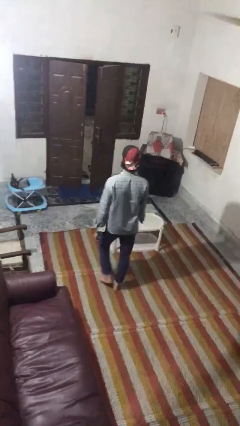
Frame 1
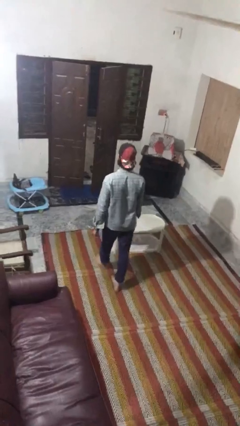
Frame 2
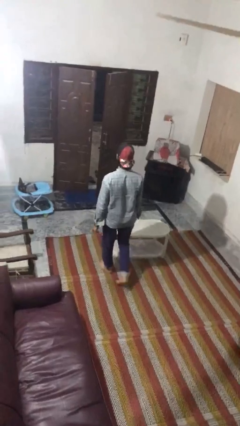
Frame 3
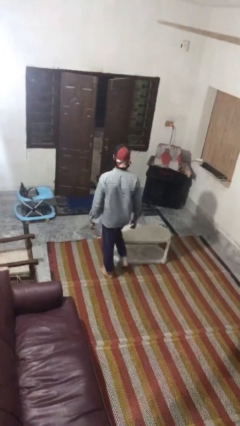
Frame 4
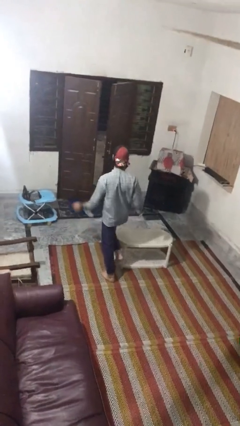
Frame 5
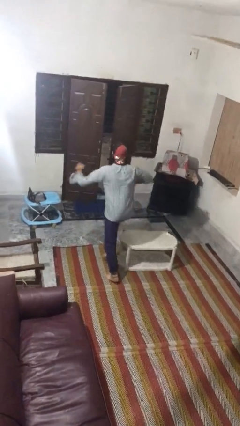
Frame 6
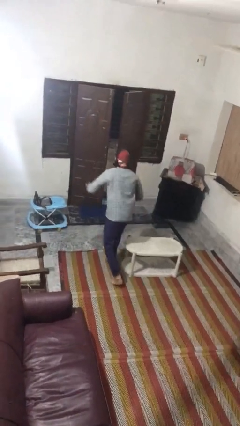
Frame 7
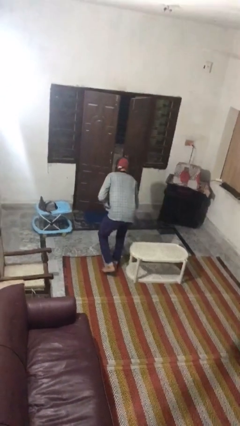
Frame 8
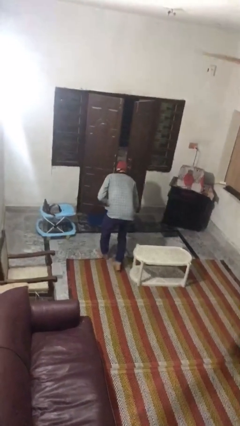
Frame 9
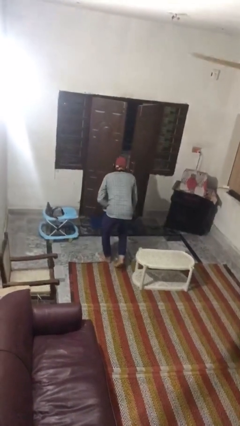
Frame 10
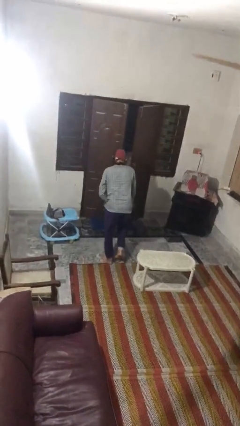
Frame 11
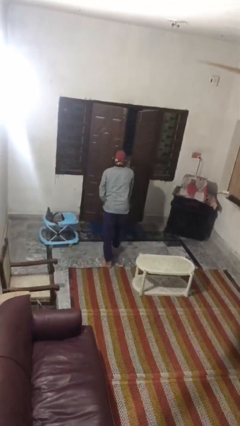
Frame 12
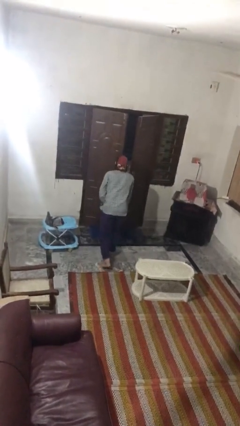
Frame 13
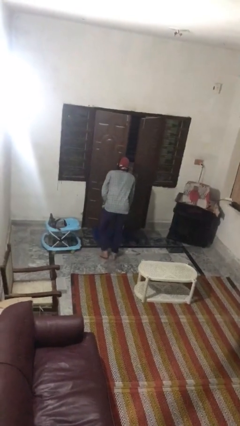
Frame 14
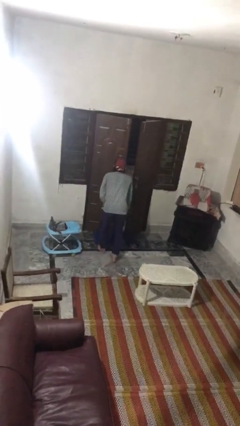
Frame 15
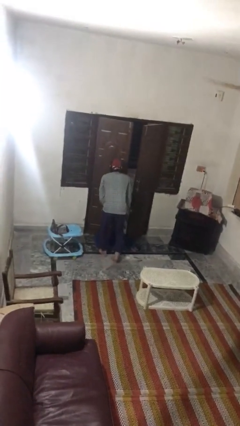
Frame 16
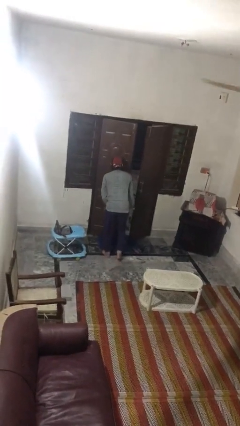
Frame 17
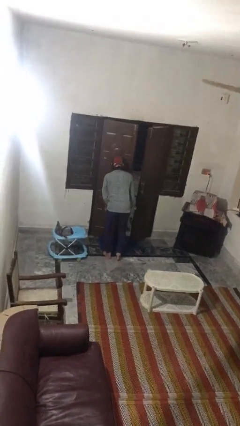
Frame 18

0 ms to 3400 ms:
person bumps into table

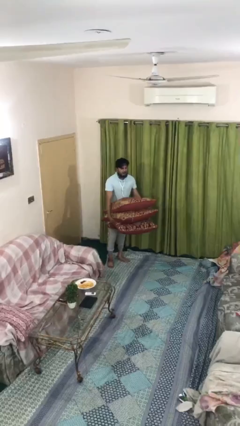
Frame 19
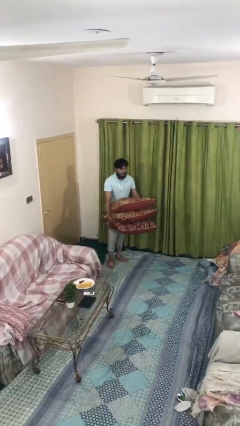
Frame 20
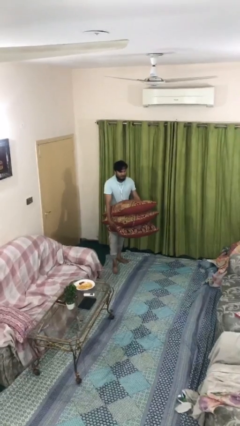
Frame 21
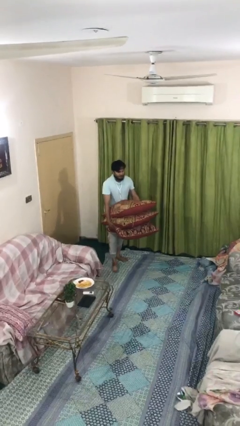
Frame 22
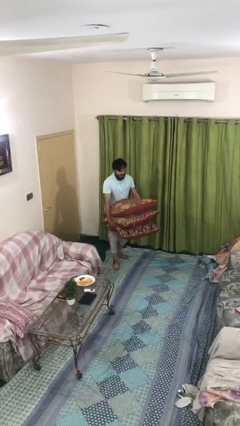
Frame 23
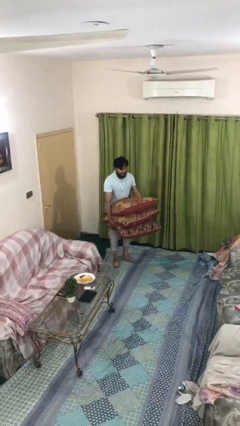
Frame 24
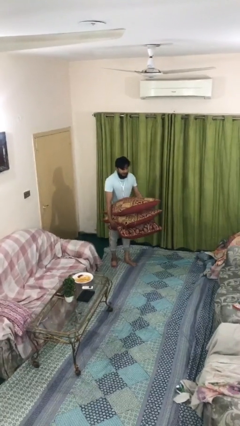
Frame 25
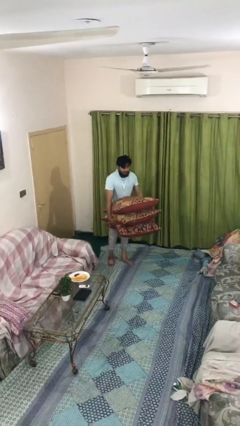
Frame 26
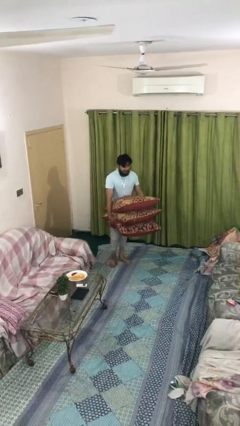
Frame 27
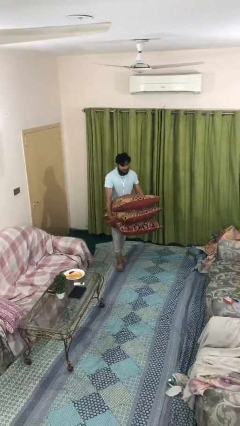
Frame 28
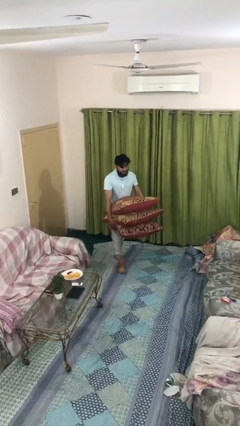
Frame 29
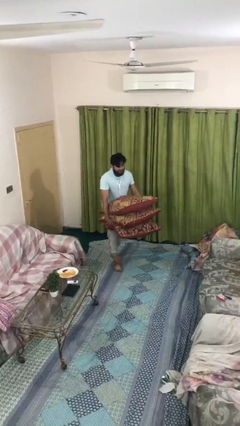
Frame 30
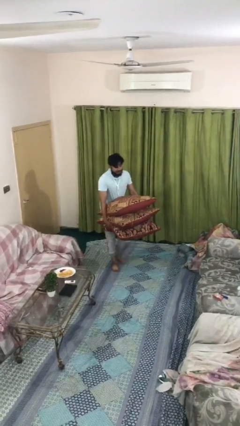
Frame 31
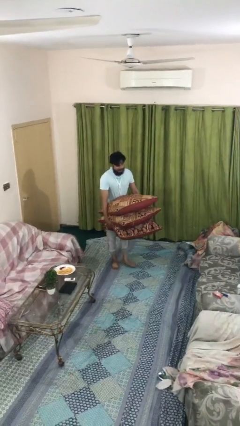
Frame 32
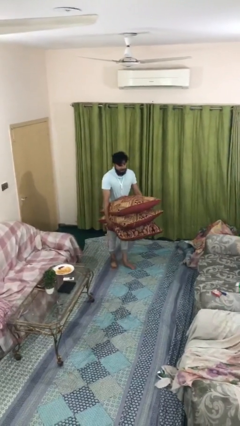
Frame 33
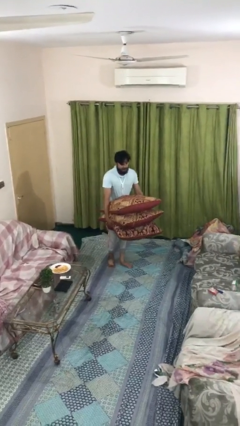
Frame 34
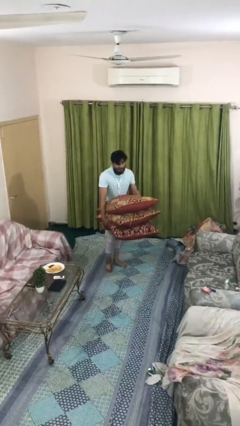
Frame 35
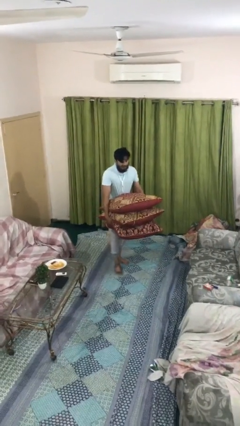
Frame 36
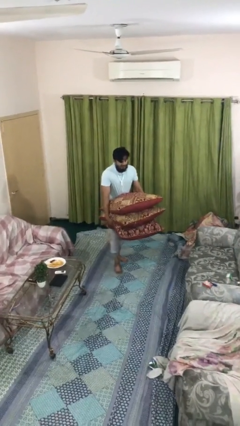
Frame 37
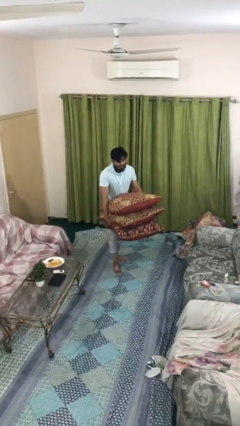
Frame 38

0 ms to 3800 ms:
person carries heavy object

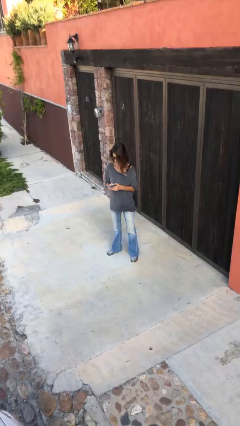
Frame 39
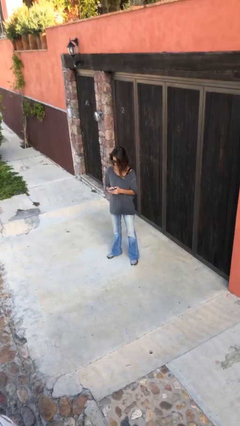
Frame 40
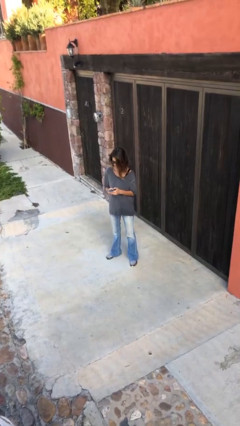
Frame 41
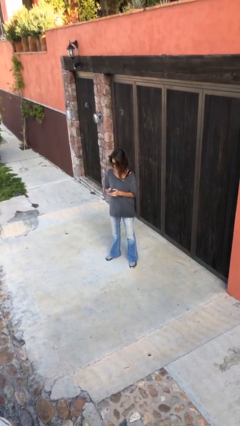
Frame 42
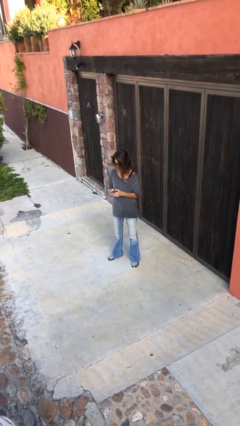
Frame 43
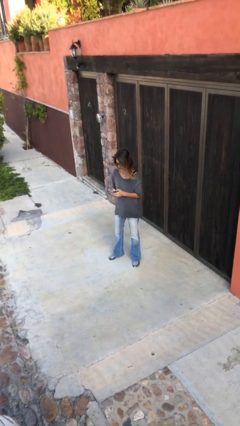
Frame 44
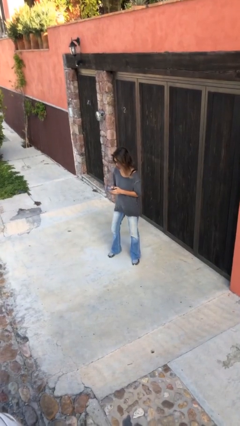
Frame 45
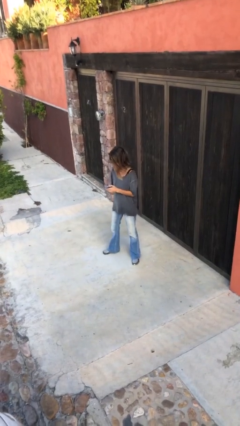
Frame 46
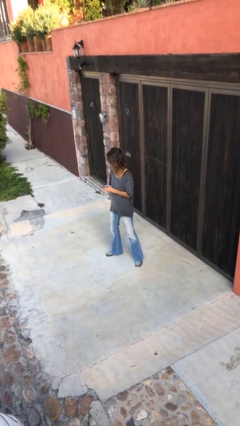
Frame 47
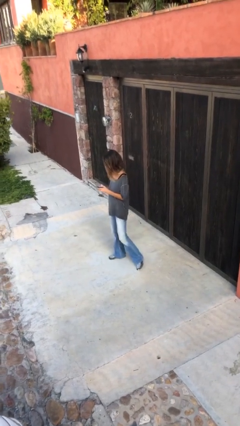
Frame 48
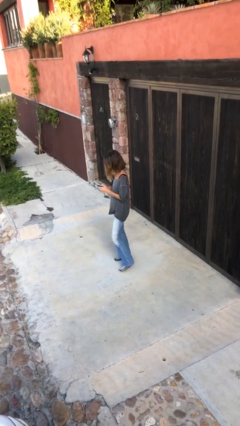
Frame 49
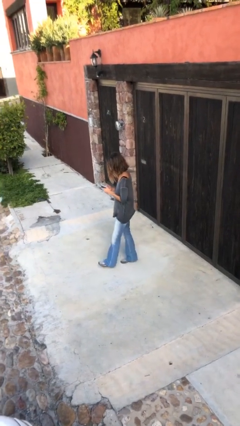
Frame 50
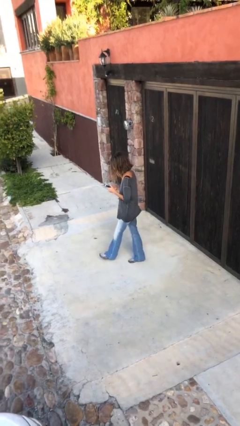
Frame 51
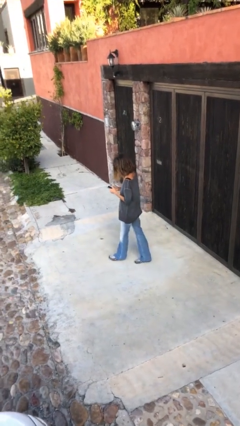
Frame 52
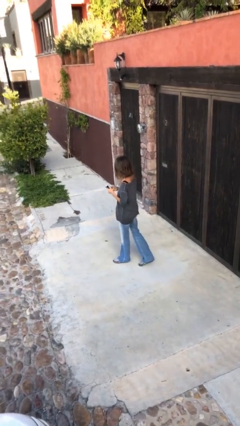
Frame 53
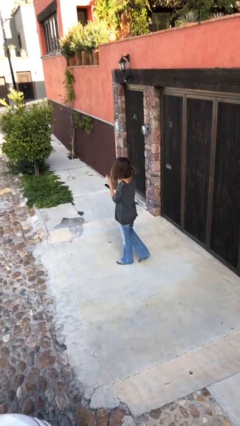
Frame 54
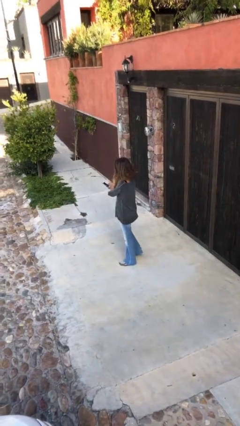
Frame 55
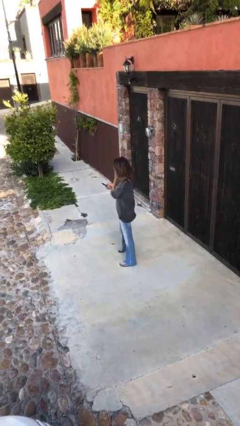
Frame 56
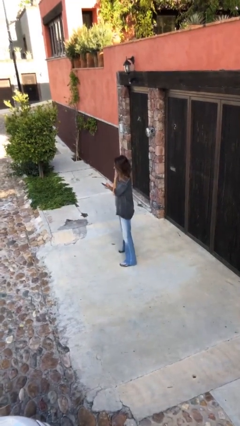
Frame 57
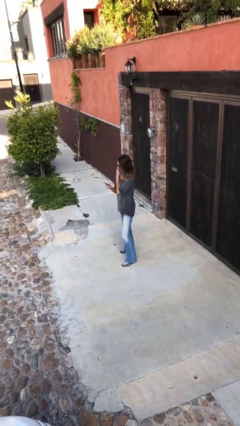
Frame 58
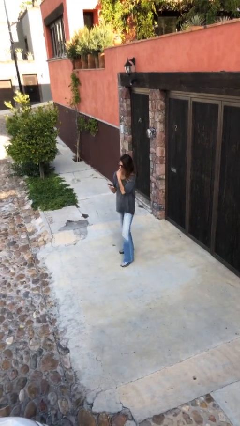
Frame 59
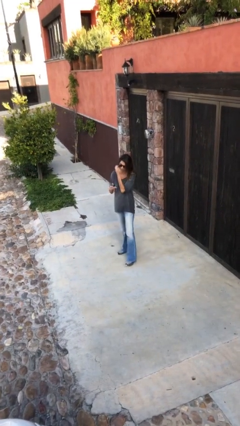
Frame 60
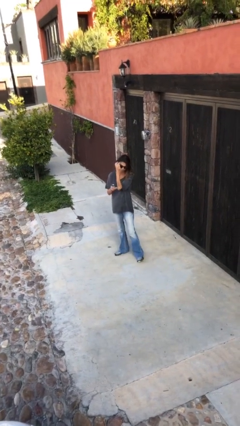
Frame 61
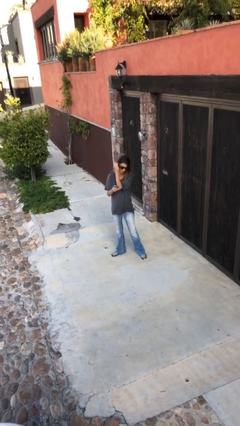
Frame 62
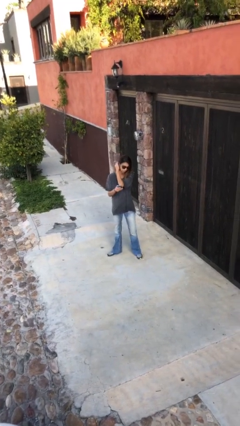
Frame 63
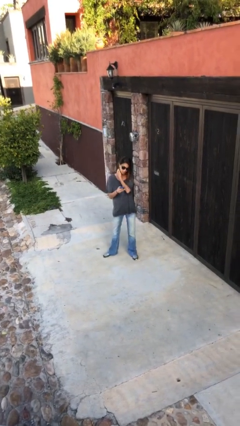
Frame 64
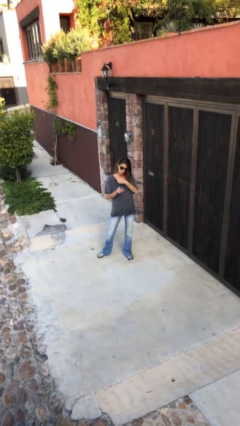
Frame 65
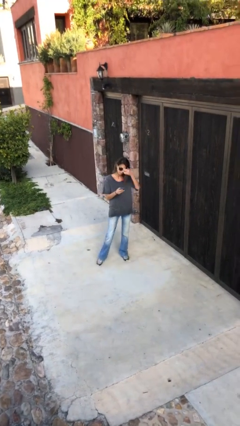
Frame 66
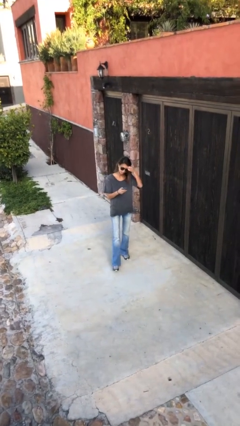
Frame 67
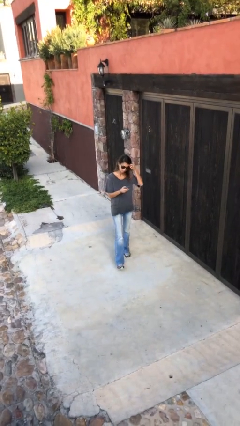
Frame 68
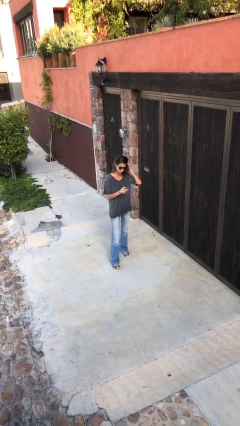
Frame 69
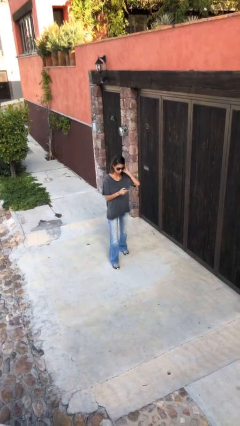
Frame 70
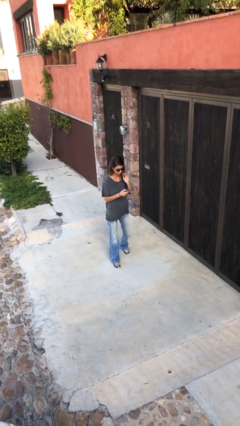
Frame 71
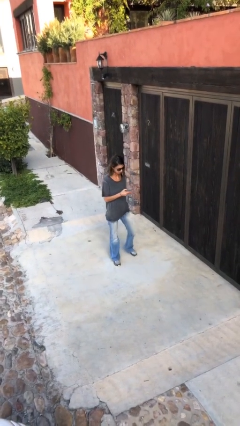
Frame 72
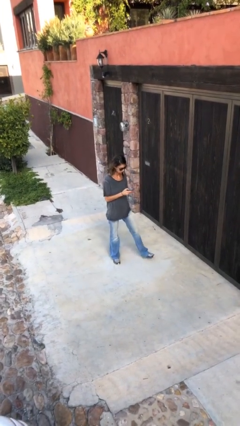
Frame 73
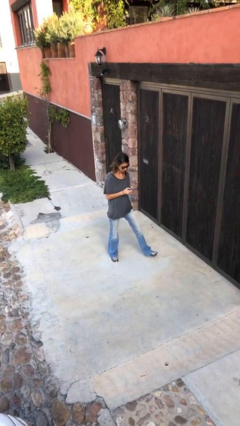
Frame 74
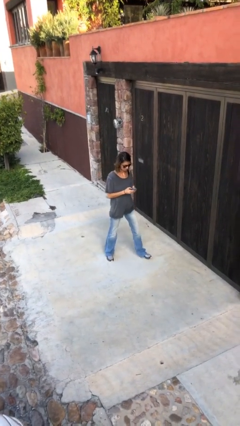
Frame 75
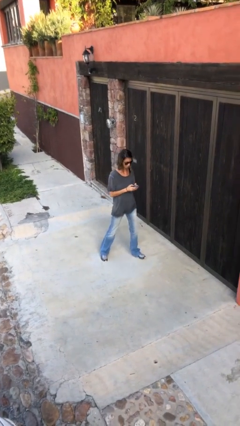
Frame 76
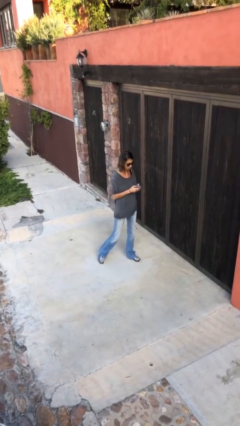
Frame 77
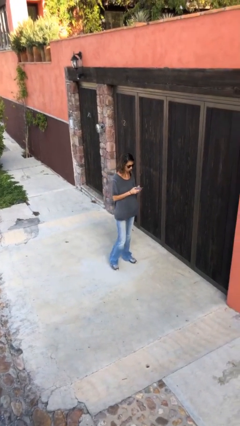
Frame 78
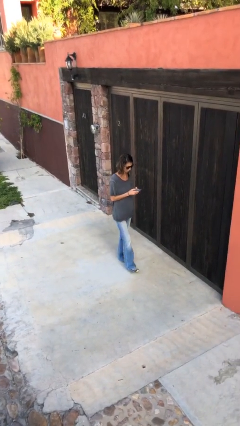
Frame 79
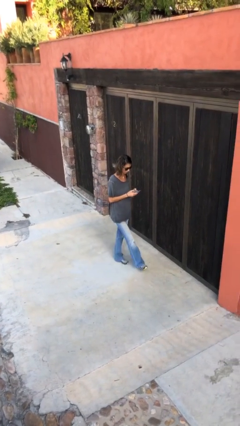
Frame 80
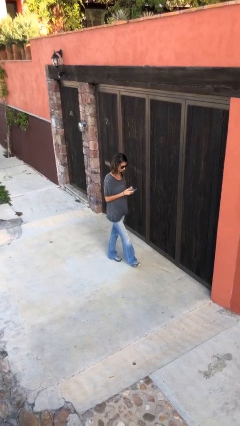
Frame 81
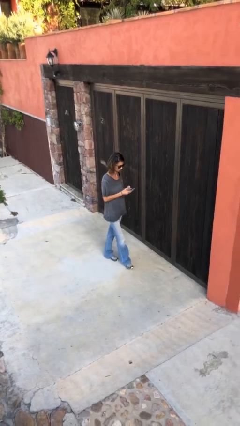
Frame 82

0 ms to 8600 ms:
person texts on phone

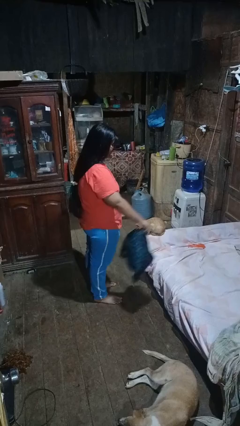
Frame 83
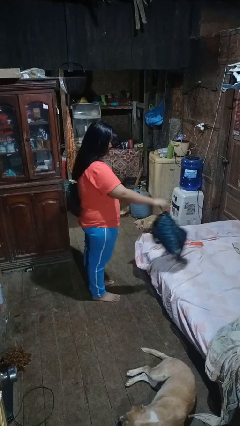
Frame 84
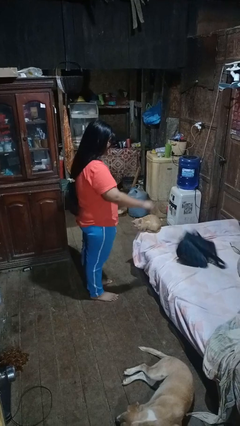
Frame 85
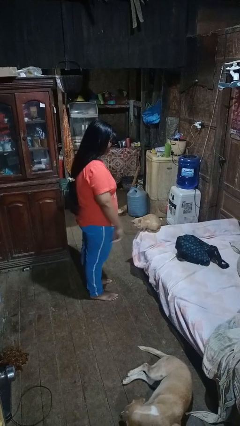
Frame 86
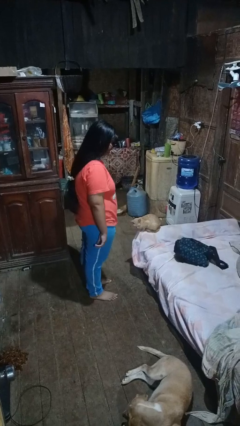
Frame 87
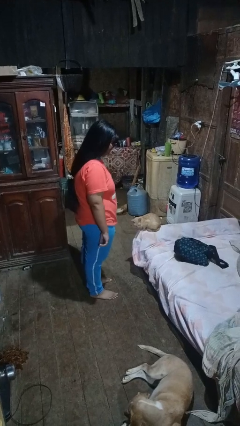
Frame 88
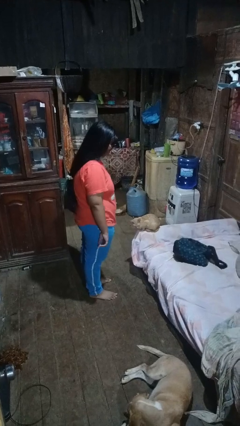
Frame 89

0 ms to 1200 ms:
person throws object on bed

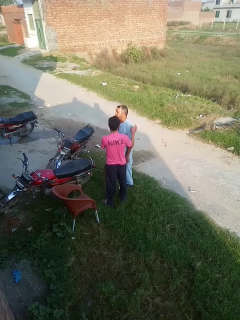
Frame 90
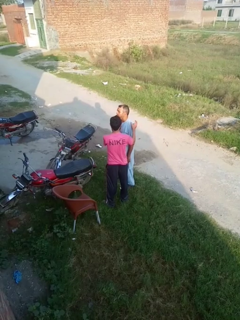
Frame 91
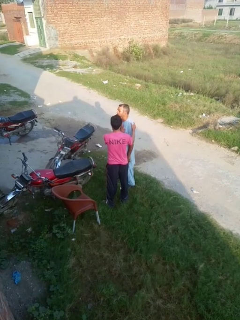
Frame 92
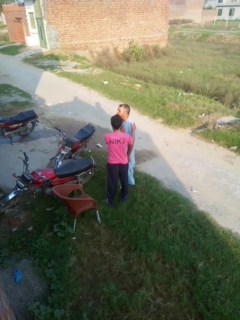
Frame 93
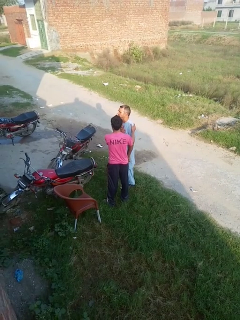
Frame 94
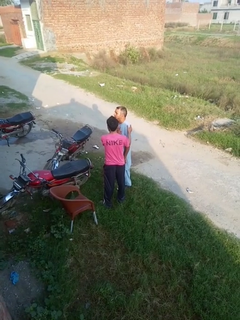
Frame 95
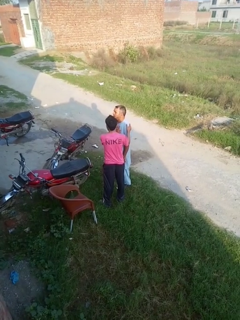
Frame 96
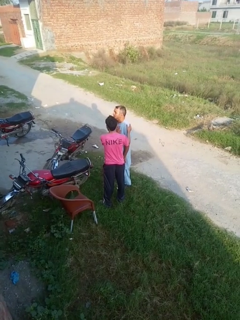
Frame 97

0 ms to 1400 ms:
person grabs person by shoulder
